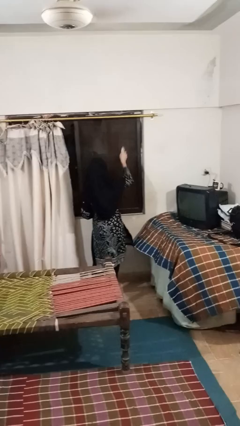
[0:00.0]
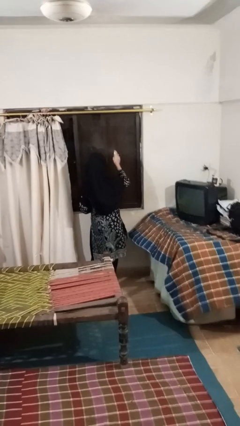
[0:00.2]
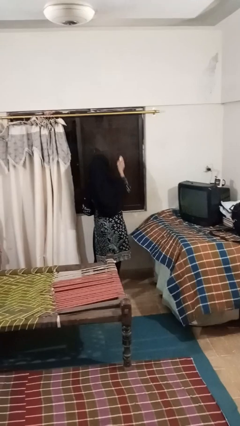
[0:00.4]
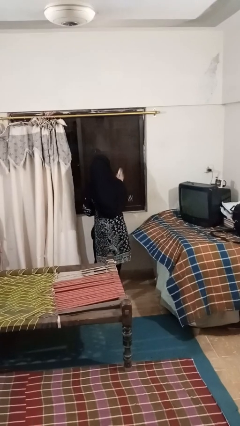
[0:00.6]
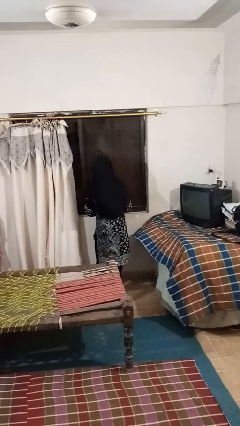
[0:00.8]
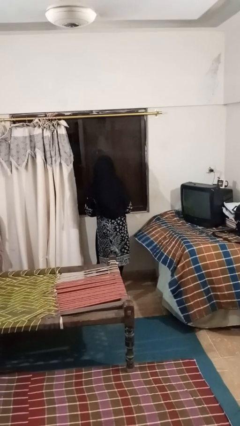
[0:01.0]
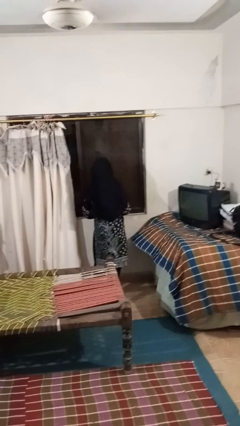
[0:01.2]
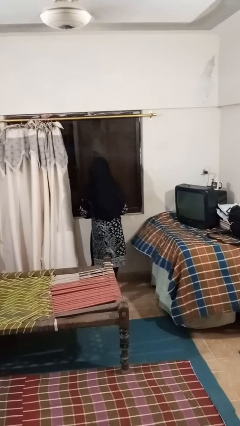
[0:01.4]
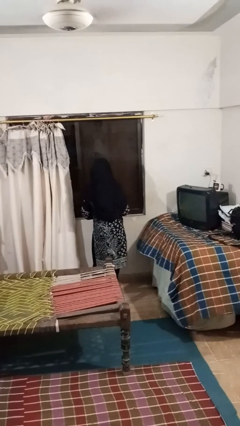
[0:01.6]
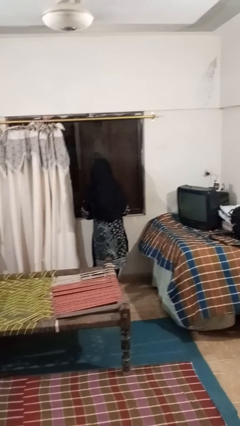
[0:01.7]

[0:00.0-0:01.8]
person sprays from bottle

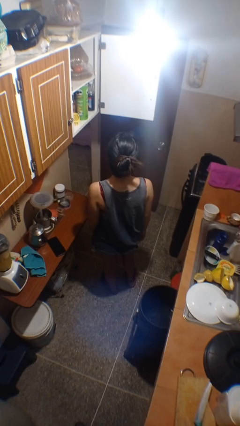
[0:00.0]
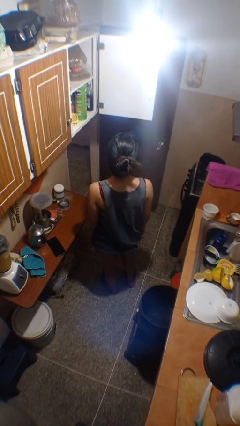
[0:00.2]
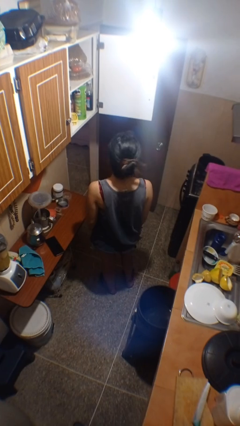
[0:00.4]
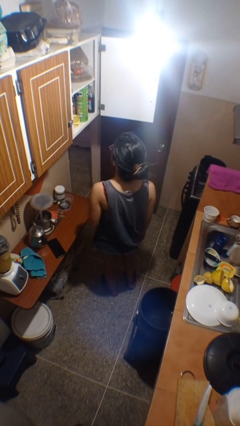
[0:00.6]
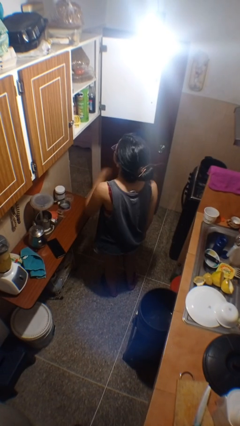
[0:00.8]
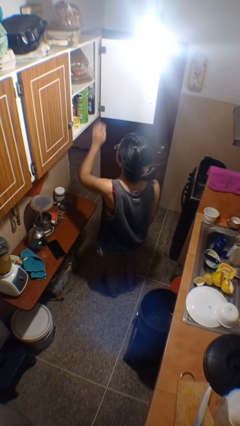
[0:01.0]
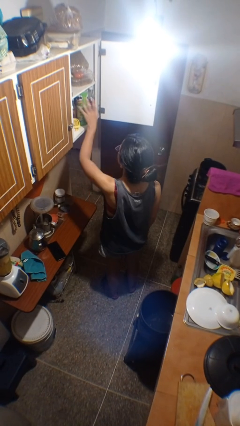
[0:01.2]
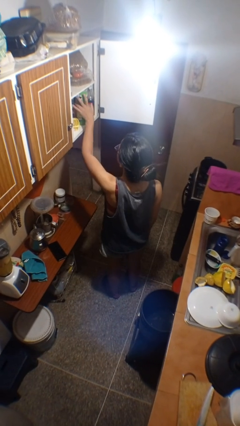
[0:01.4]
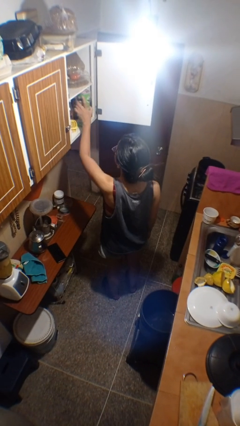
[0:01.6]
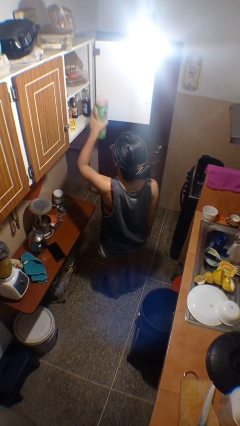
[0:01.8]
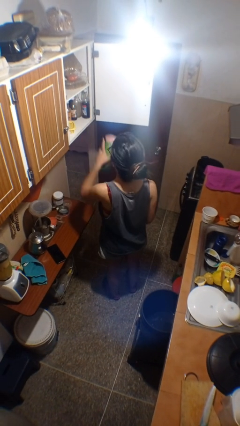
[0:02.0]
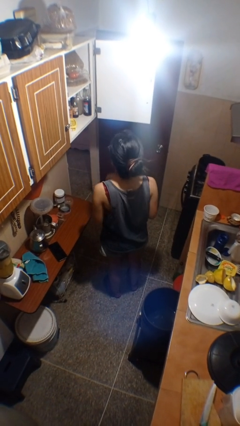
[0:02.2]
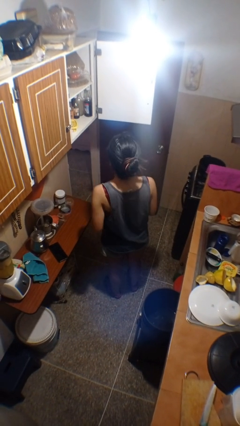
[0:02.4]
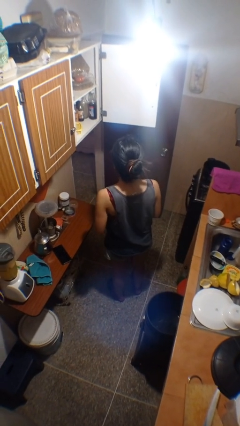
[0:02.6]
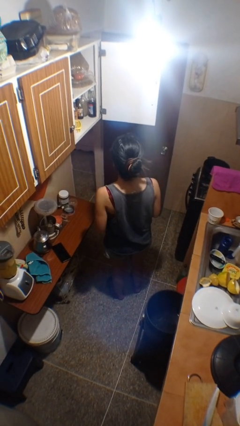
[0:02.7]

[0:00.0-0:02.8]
person takes object from cabinet

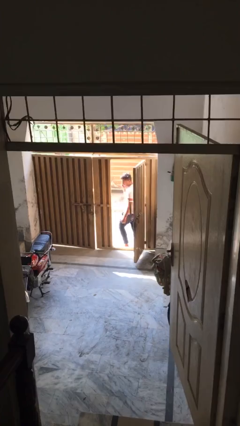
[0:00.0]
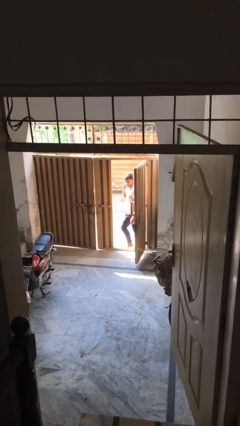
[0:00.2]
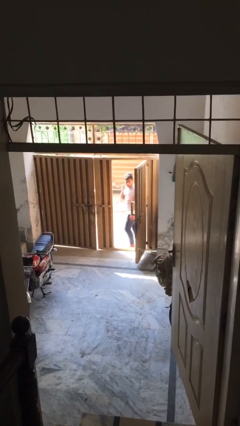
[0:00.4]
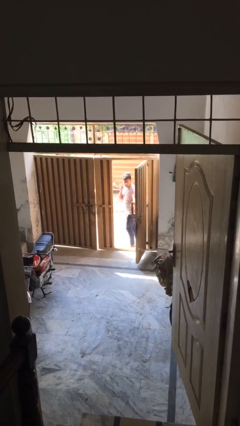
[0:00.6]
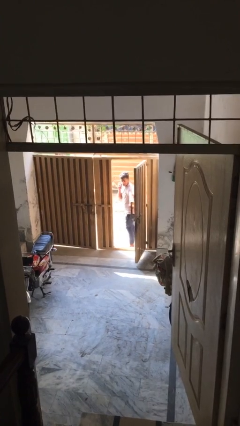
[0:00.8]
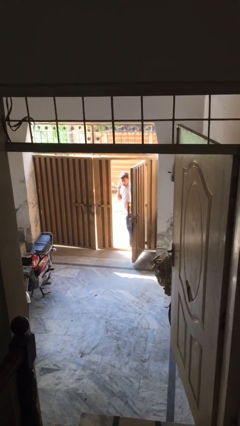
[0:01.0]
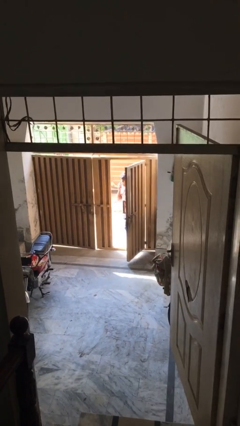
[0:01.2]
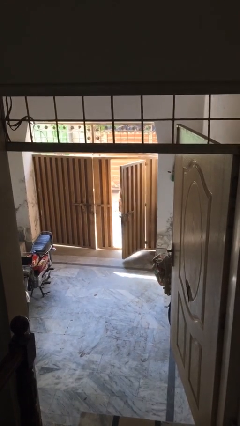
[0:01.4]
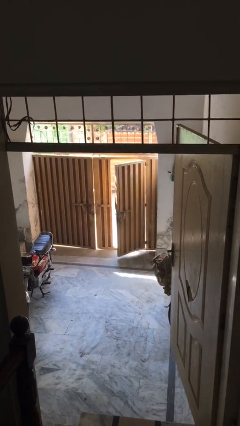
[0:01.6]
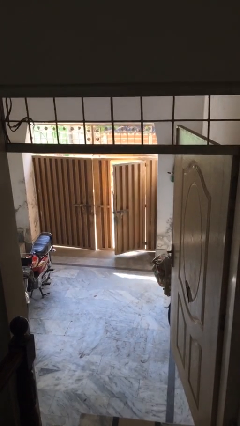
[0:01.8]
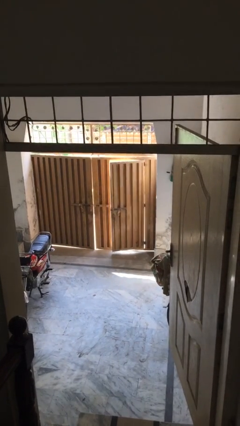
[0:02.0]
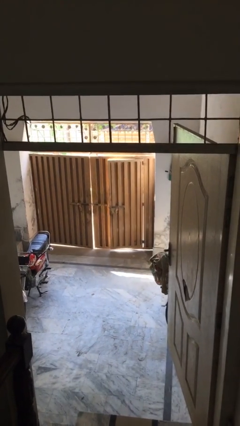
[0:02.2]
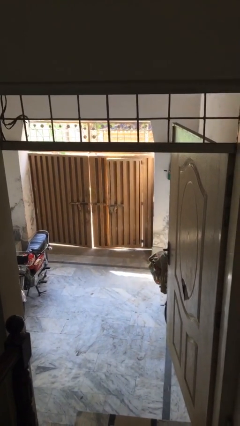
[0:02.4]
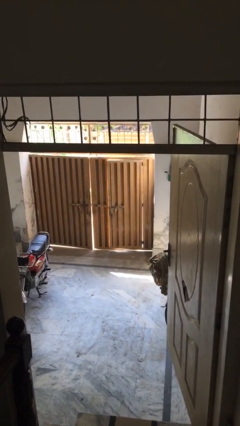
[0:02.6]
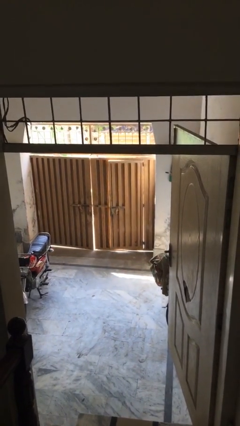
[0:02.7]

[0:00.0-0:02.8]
person closes facility door

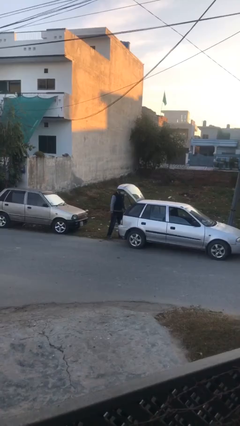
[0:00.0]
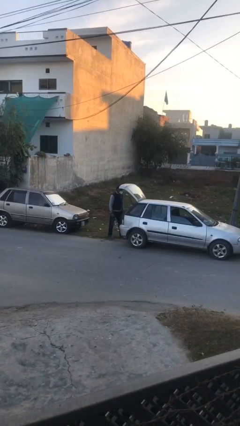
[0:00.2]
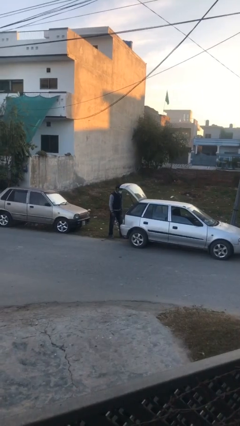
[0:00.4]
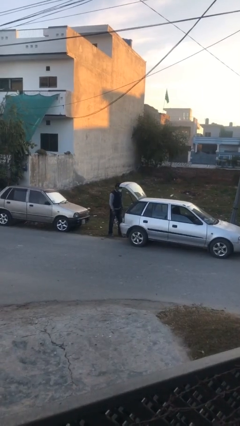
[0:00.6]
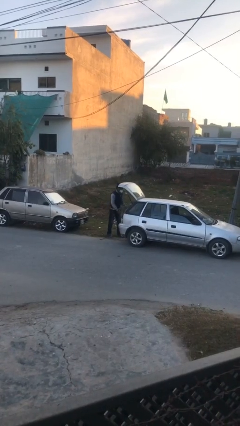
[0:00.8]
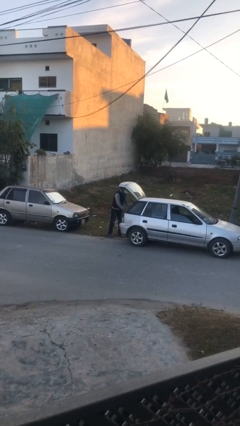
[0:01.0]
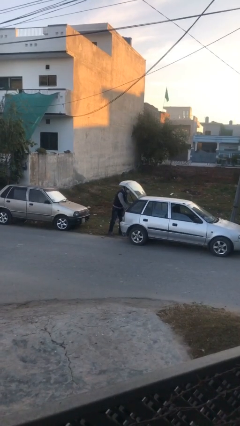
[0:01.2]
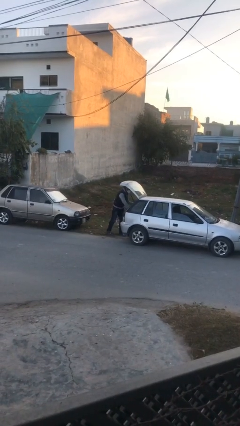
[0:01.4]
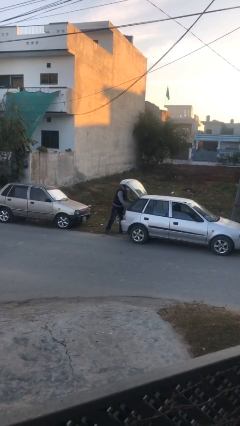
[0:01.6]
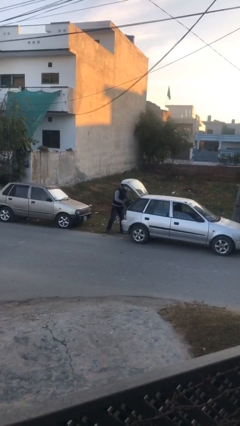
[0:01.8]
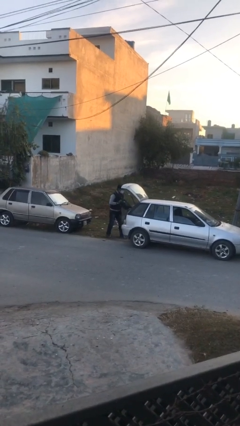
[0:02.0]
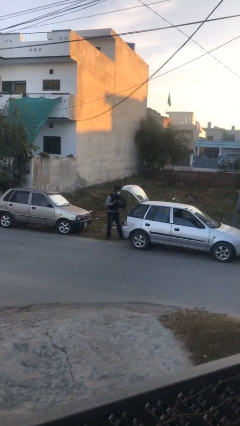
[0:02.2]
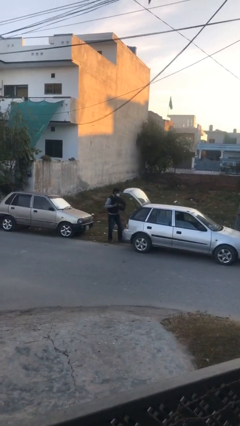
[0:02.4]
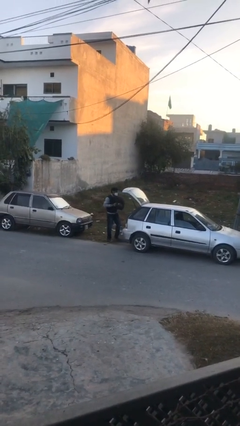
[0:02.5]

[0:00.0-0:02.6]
person unloads car

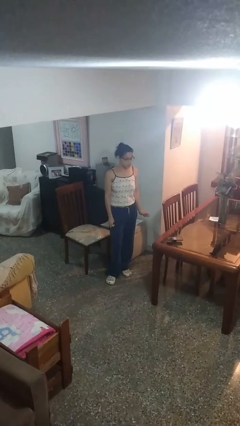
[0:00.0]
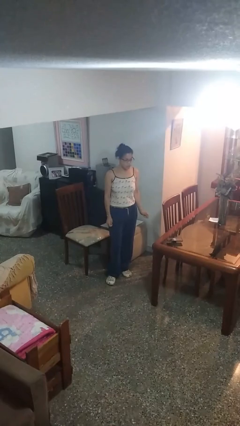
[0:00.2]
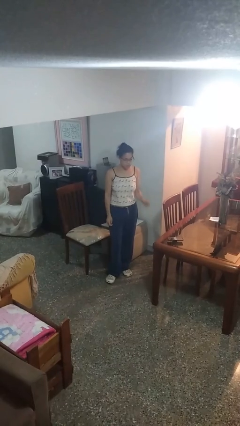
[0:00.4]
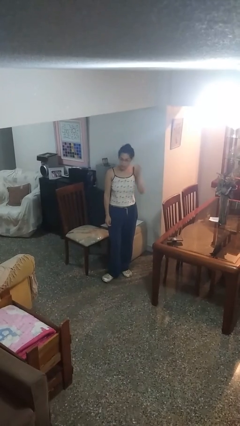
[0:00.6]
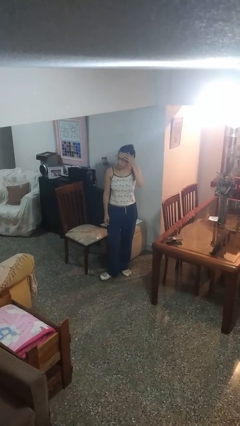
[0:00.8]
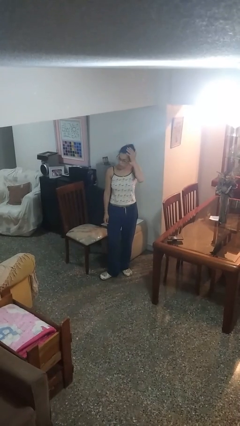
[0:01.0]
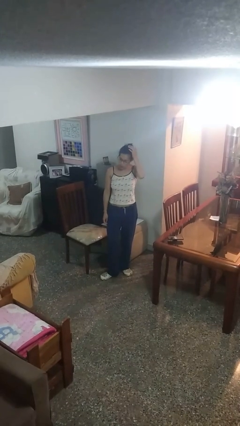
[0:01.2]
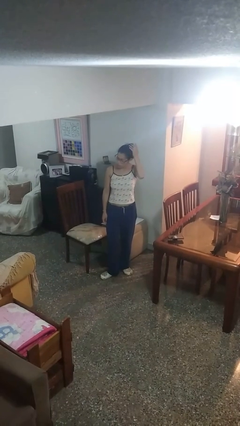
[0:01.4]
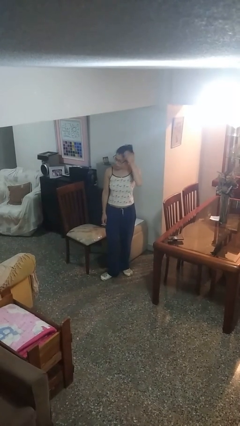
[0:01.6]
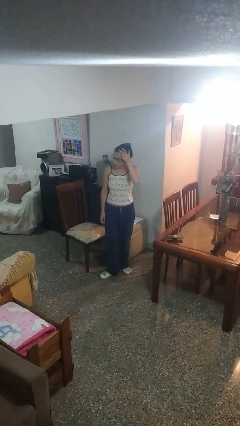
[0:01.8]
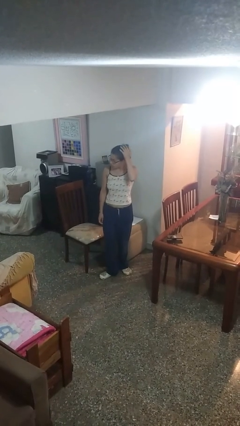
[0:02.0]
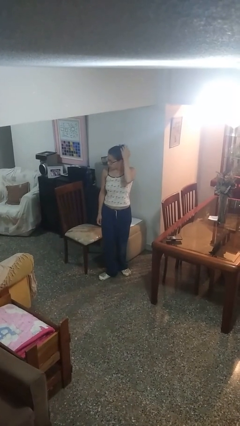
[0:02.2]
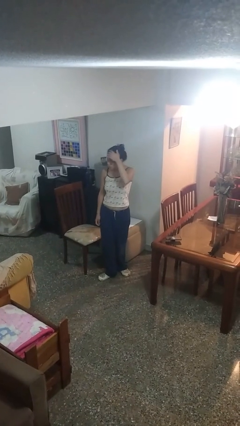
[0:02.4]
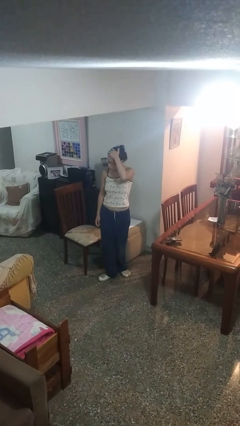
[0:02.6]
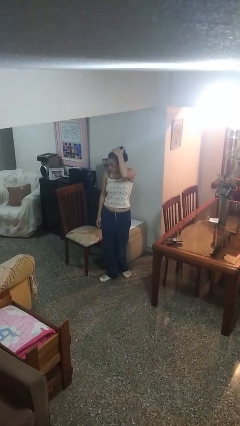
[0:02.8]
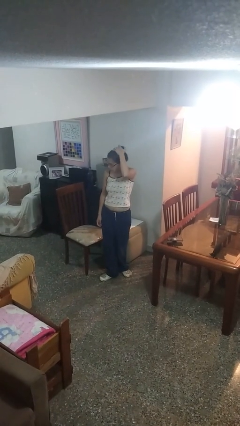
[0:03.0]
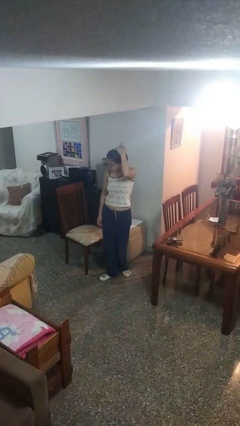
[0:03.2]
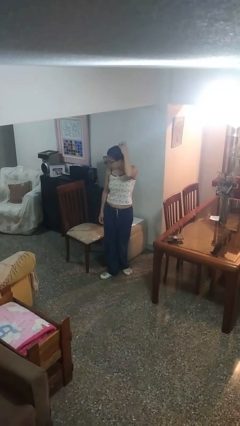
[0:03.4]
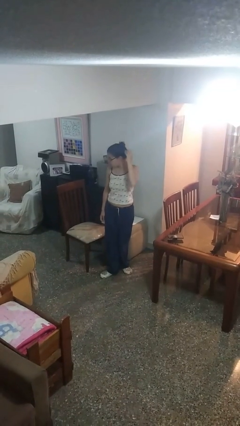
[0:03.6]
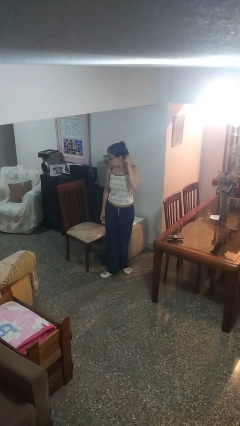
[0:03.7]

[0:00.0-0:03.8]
person pats head

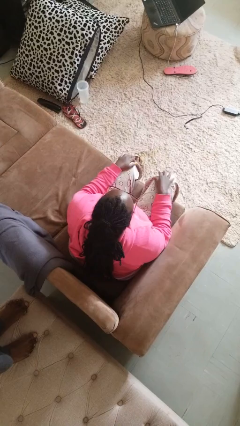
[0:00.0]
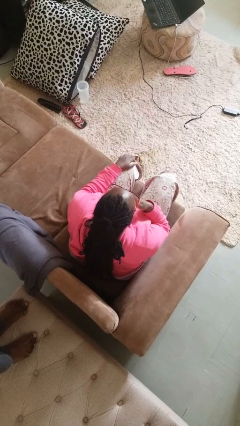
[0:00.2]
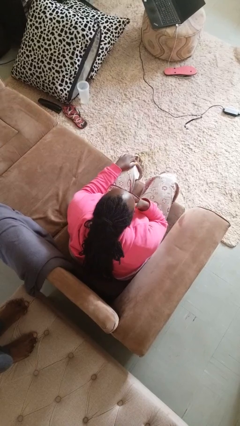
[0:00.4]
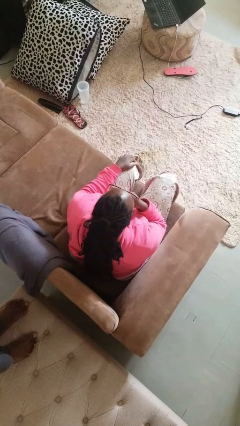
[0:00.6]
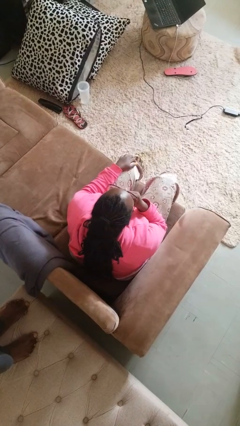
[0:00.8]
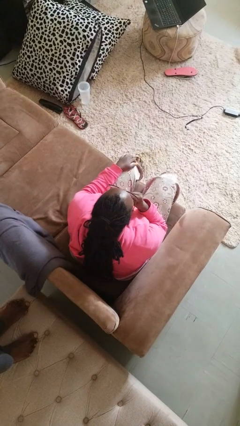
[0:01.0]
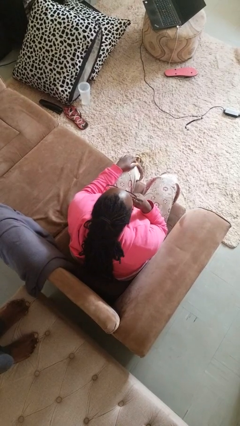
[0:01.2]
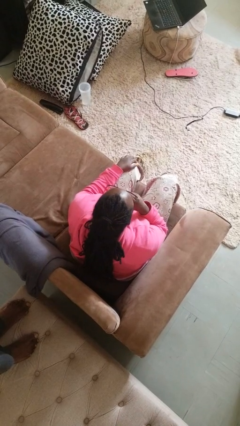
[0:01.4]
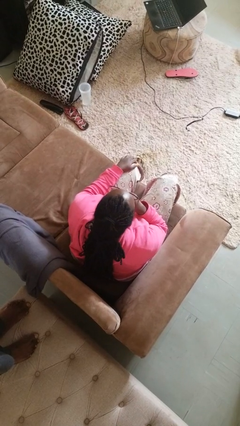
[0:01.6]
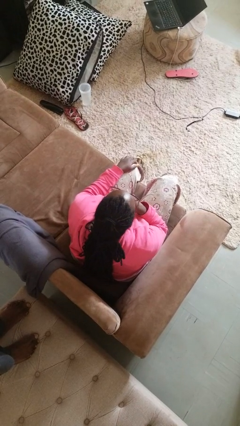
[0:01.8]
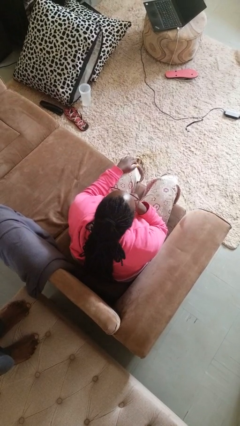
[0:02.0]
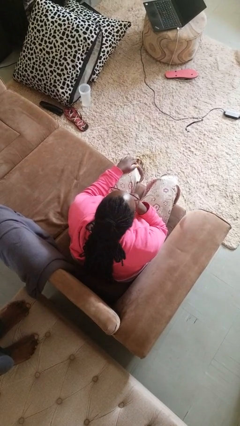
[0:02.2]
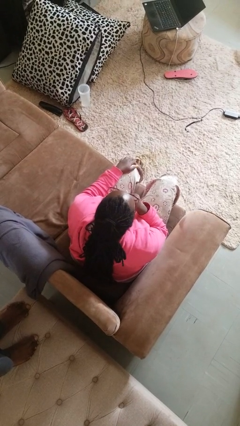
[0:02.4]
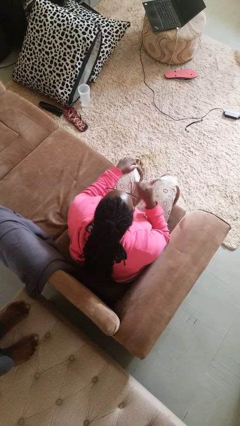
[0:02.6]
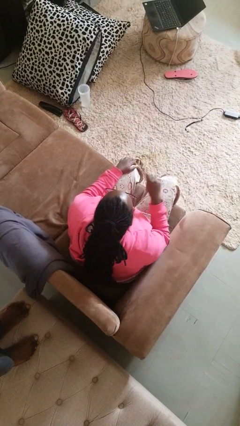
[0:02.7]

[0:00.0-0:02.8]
person strokes chin

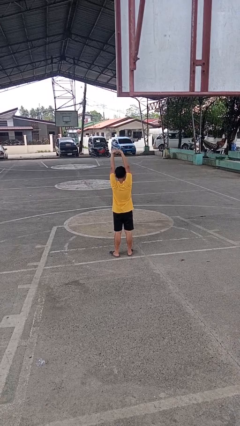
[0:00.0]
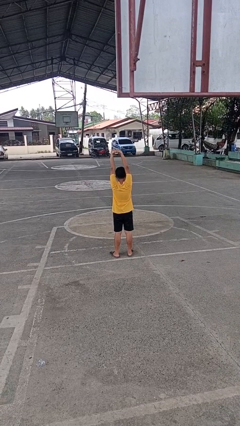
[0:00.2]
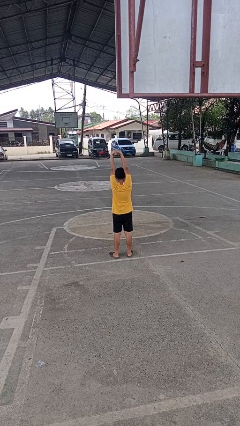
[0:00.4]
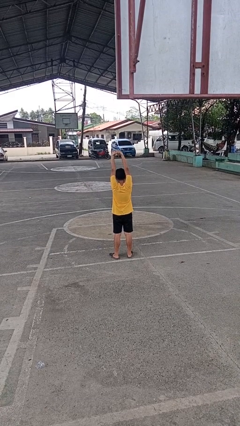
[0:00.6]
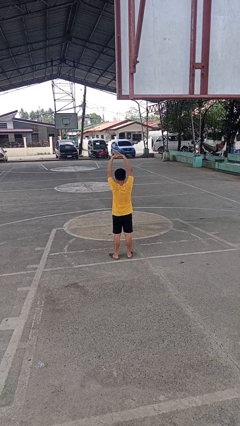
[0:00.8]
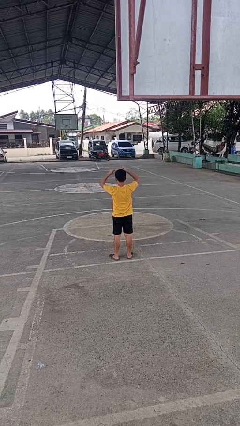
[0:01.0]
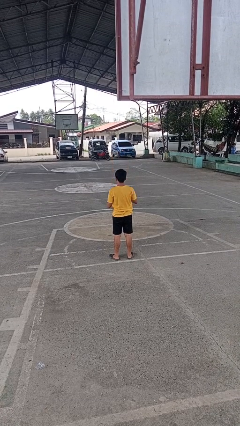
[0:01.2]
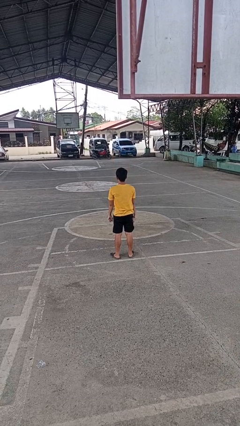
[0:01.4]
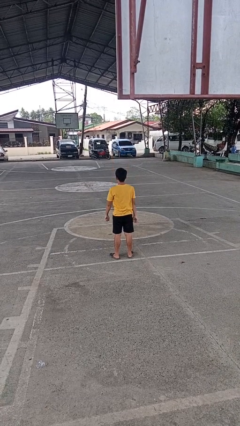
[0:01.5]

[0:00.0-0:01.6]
person stretches arms over head
